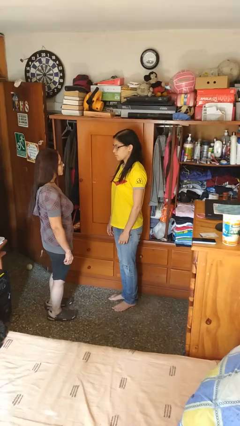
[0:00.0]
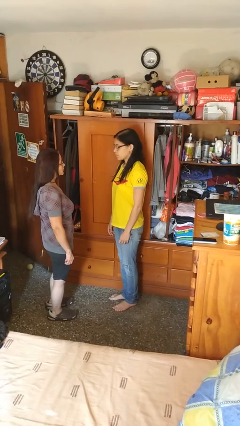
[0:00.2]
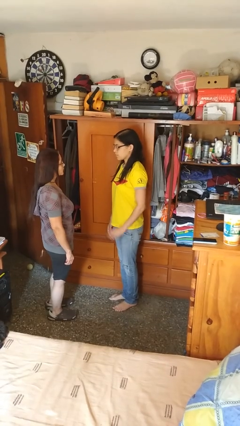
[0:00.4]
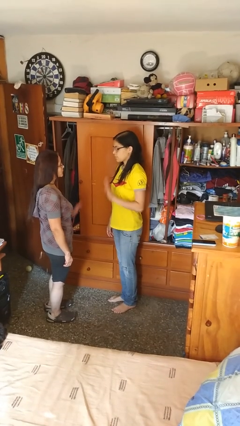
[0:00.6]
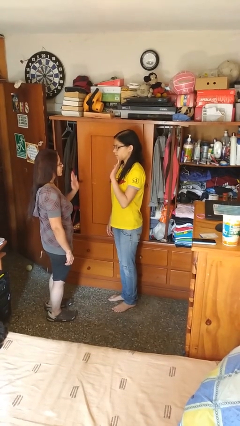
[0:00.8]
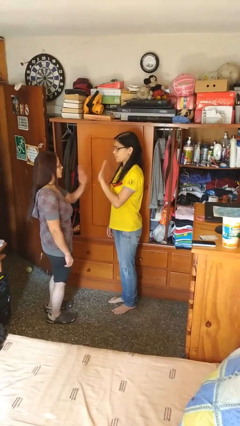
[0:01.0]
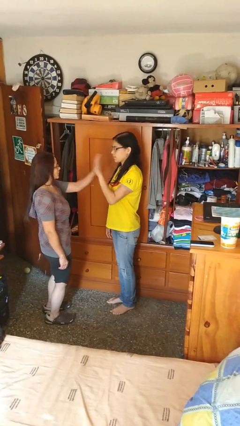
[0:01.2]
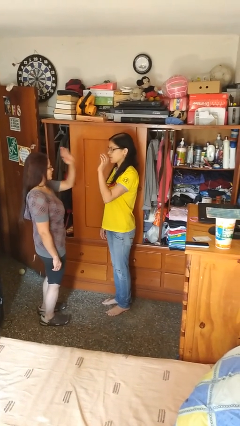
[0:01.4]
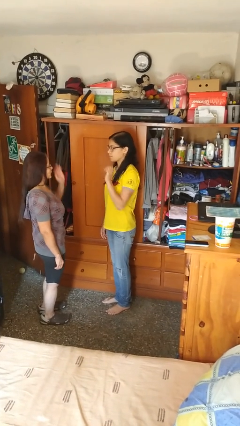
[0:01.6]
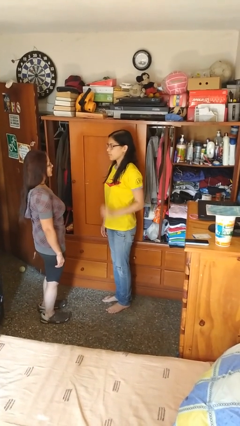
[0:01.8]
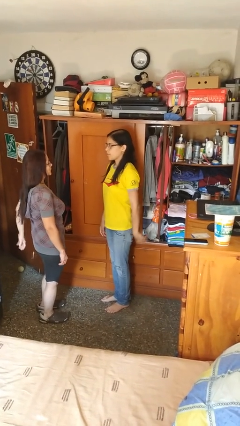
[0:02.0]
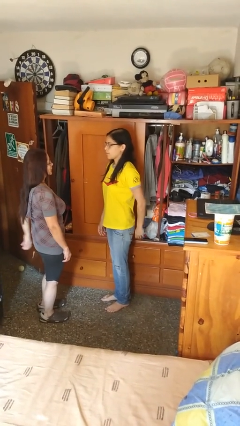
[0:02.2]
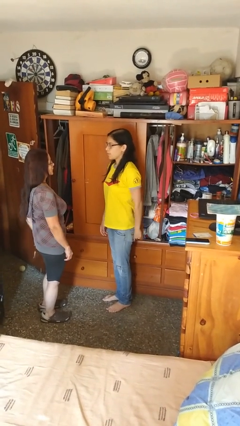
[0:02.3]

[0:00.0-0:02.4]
person highfives hand

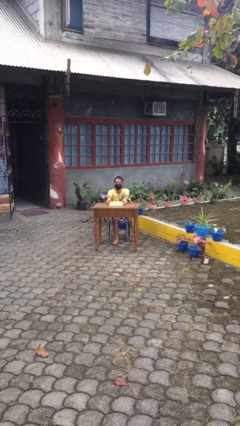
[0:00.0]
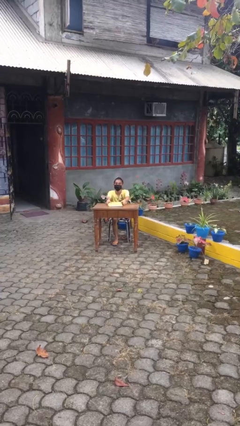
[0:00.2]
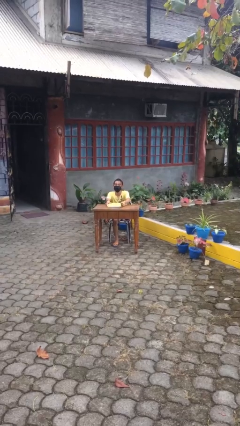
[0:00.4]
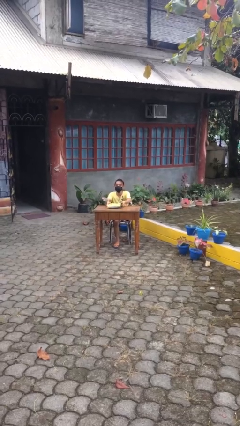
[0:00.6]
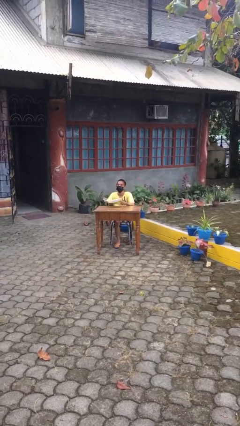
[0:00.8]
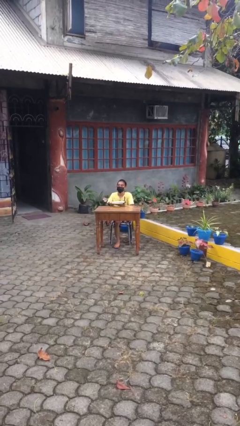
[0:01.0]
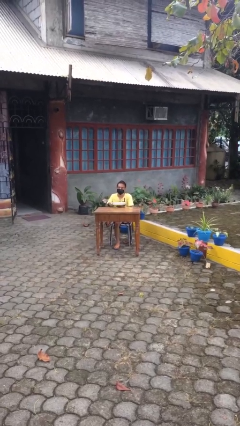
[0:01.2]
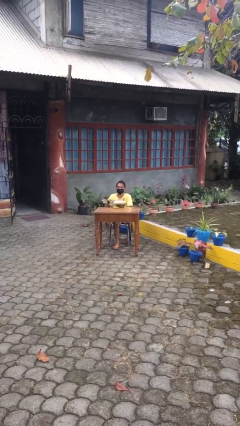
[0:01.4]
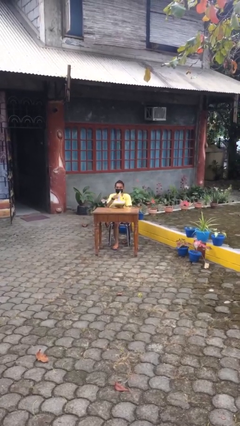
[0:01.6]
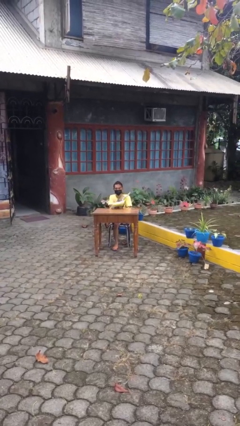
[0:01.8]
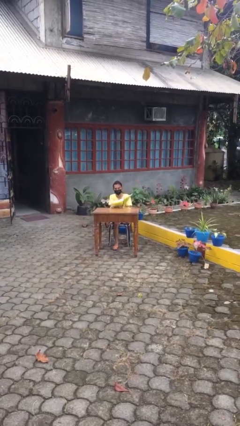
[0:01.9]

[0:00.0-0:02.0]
person picks up object from table

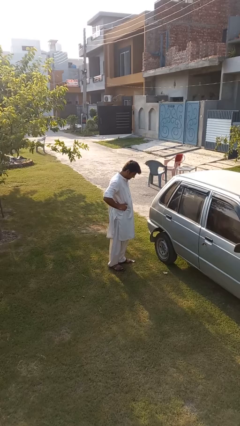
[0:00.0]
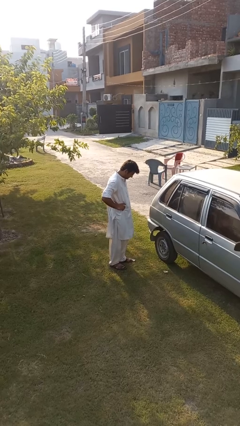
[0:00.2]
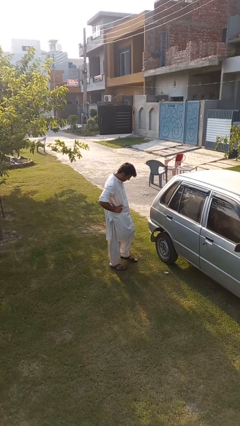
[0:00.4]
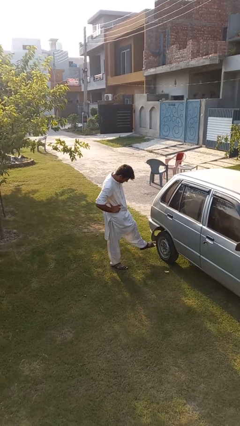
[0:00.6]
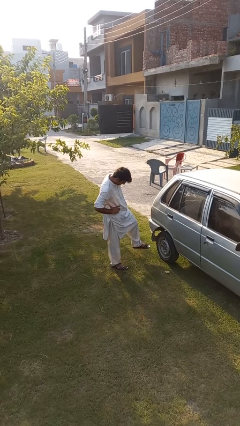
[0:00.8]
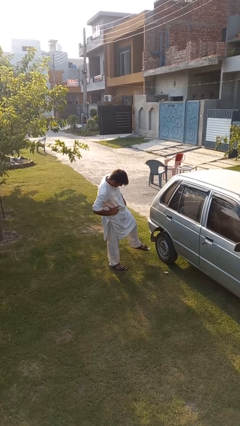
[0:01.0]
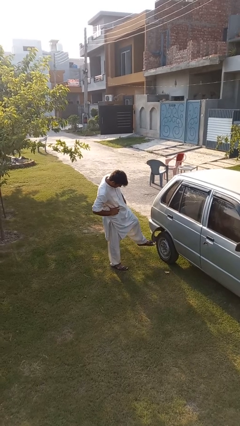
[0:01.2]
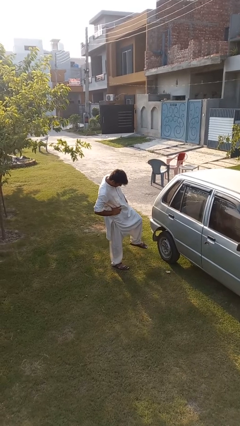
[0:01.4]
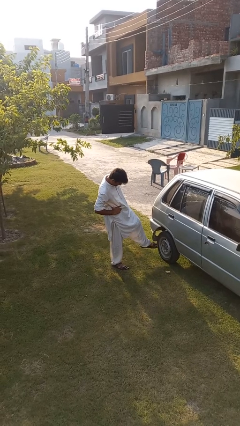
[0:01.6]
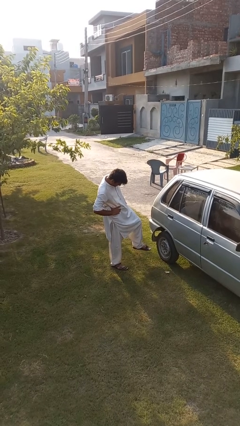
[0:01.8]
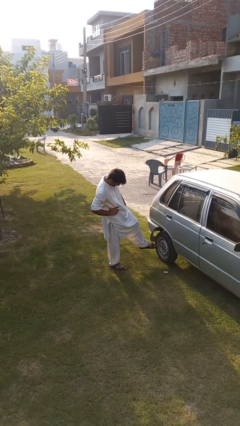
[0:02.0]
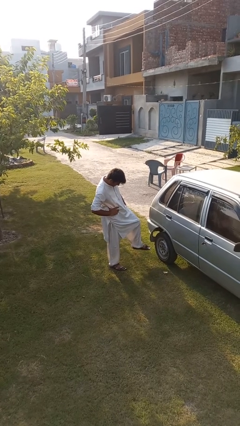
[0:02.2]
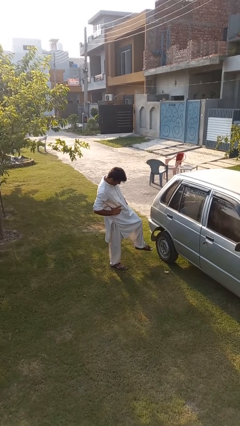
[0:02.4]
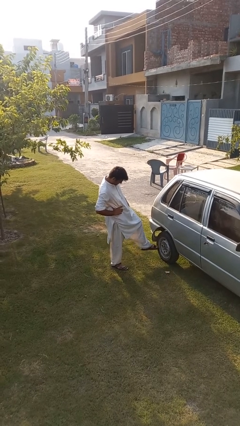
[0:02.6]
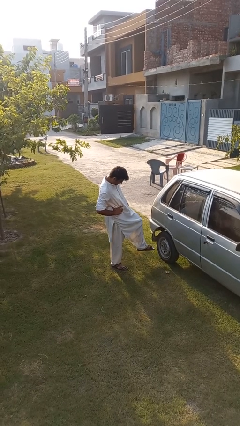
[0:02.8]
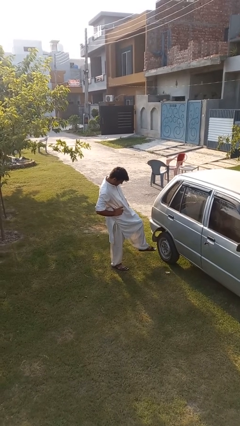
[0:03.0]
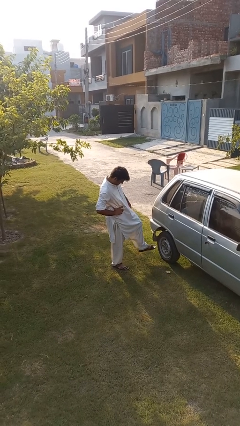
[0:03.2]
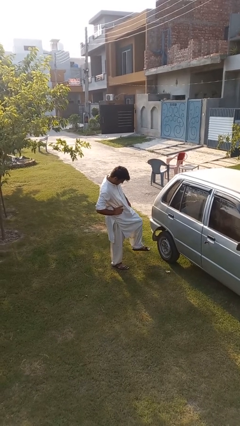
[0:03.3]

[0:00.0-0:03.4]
person kicks car tires

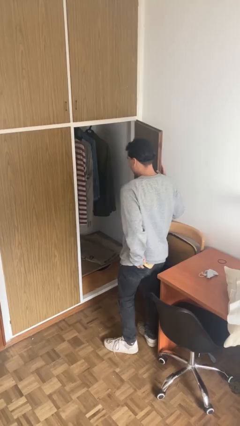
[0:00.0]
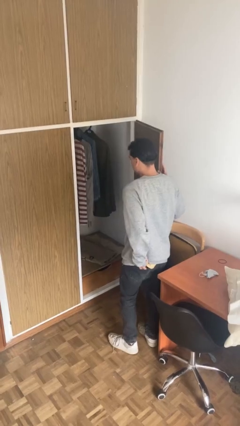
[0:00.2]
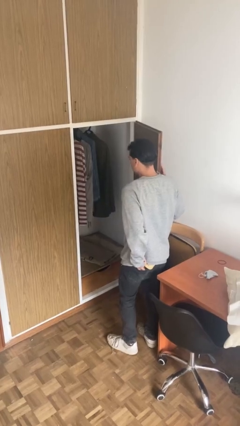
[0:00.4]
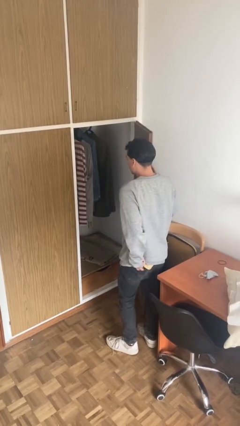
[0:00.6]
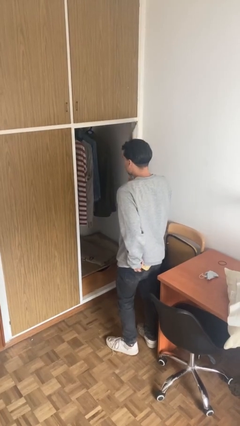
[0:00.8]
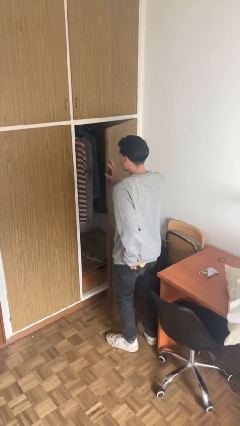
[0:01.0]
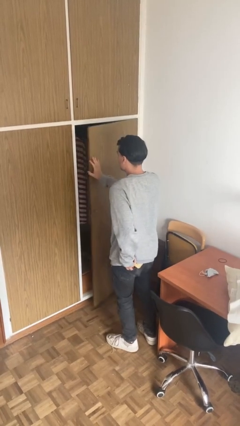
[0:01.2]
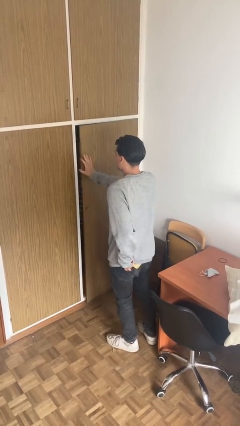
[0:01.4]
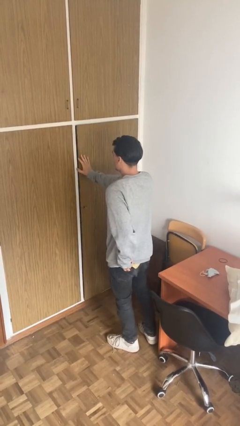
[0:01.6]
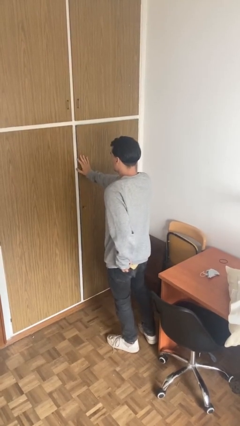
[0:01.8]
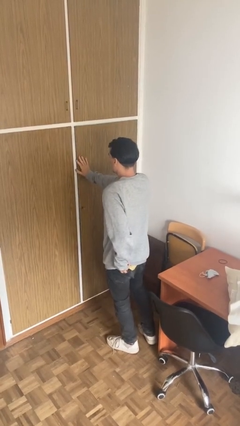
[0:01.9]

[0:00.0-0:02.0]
person closes closet door

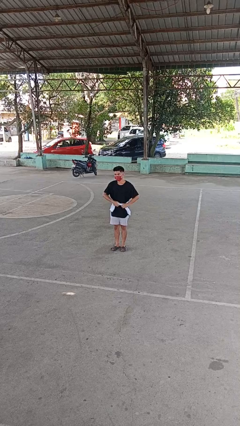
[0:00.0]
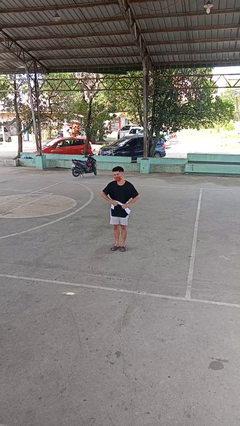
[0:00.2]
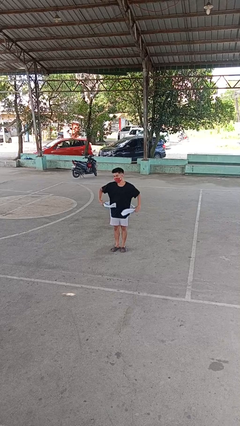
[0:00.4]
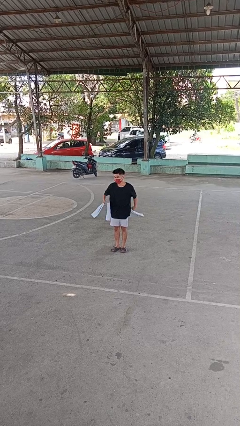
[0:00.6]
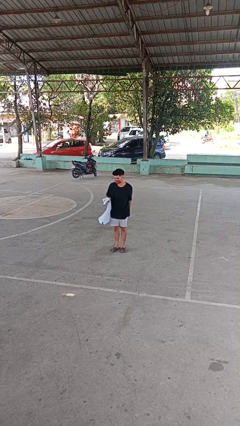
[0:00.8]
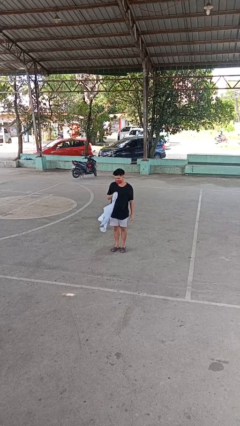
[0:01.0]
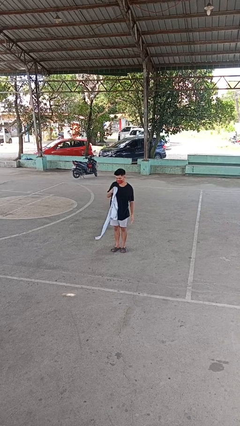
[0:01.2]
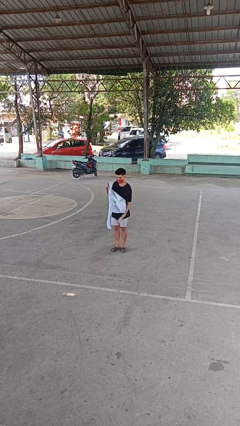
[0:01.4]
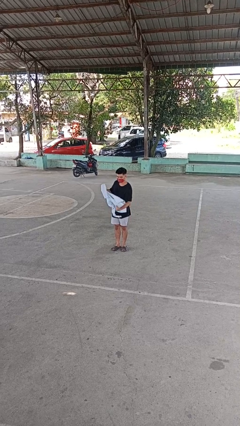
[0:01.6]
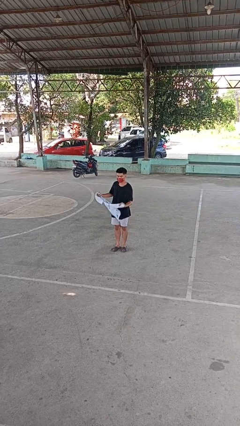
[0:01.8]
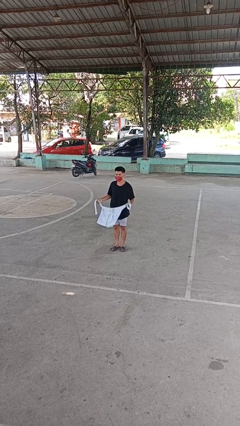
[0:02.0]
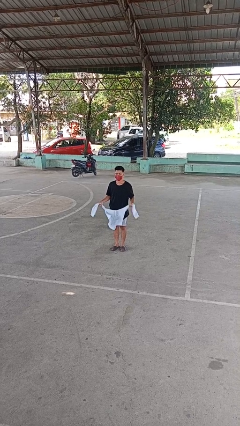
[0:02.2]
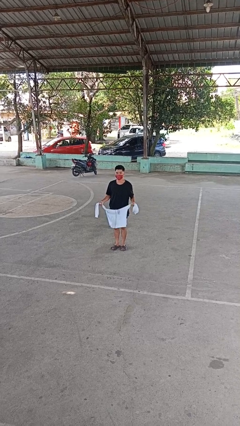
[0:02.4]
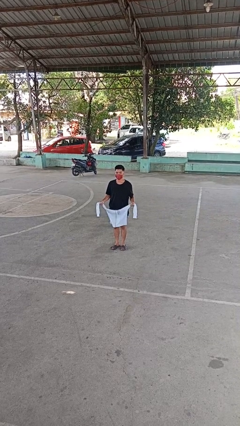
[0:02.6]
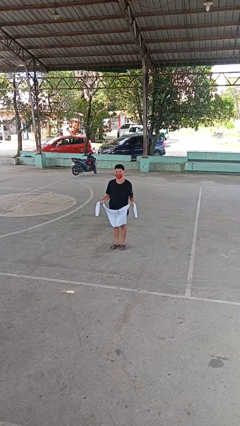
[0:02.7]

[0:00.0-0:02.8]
person unties jacket around waist

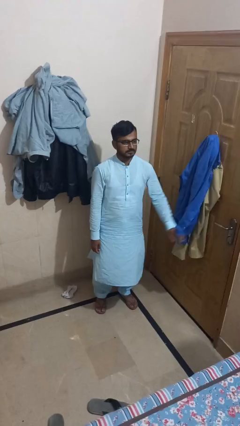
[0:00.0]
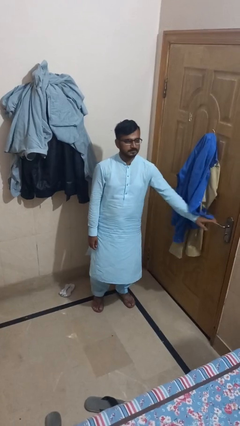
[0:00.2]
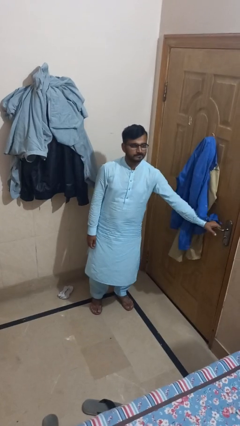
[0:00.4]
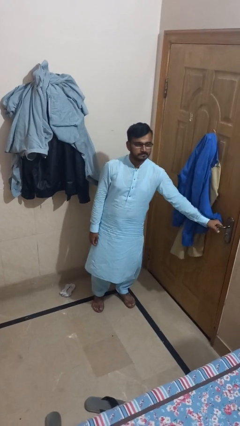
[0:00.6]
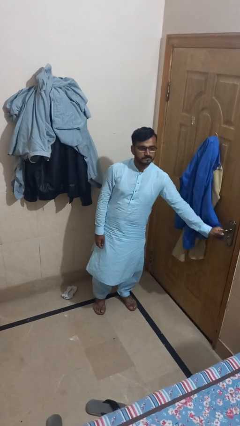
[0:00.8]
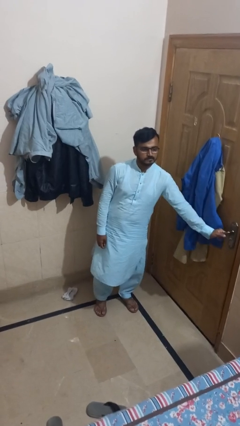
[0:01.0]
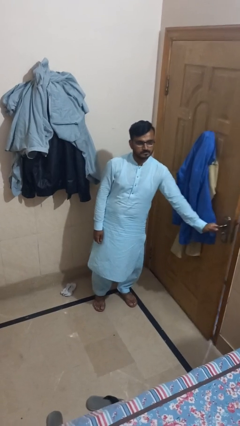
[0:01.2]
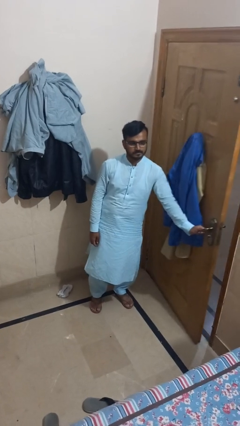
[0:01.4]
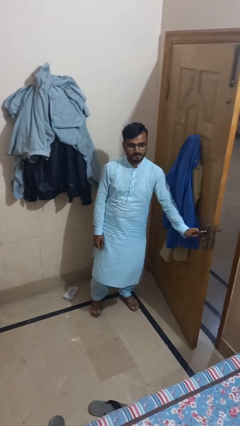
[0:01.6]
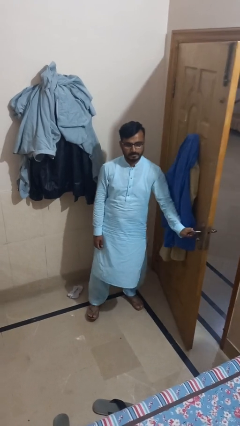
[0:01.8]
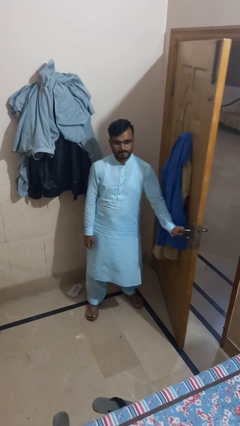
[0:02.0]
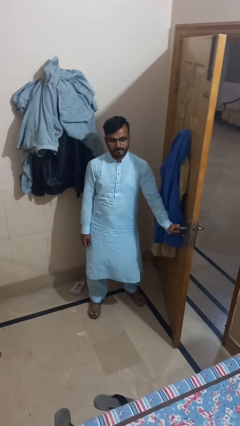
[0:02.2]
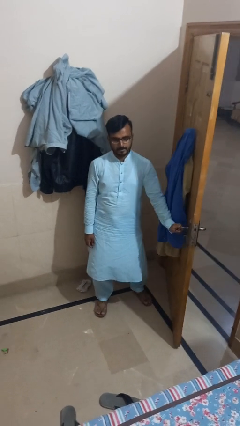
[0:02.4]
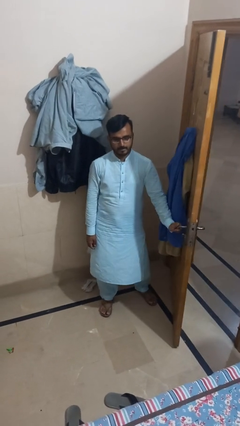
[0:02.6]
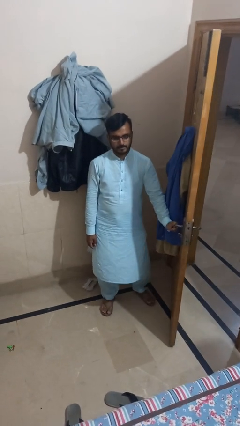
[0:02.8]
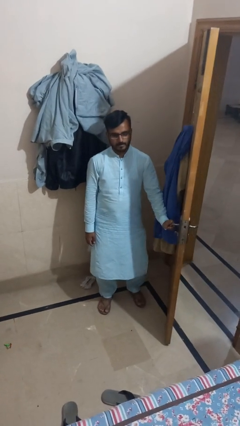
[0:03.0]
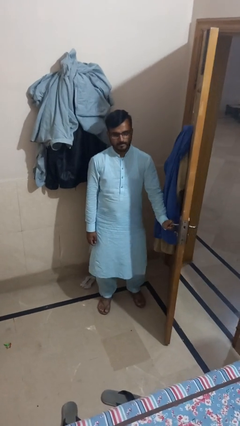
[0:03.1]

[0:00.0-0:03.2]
person opens closet door

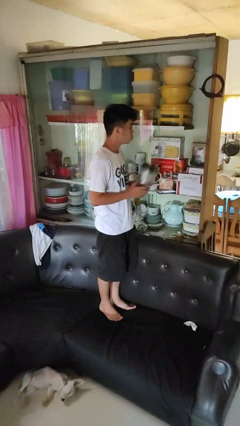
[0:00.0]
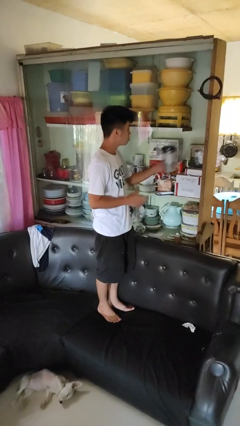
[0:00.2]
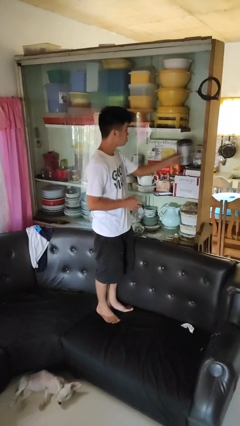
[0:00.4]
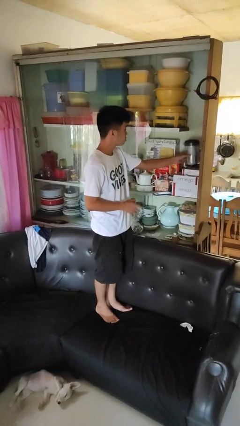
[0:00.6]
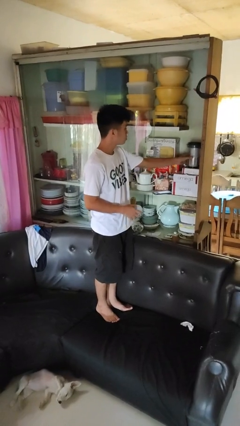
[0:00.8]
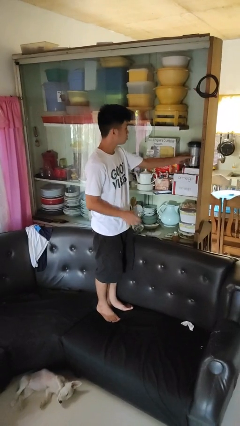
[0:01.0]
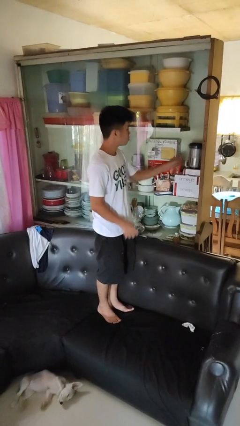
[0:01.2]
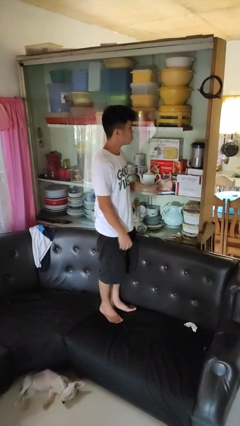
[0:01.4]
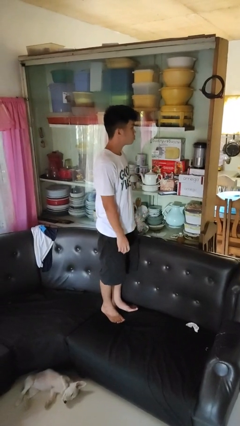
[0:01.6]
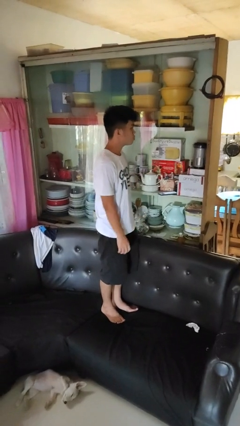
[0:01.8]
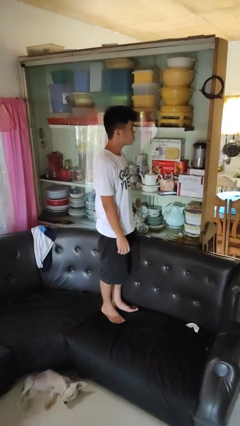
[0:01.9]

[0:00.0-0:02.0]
person puts down object into cabinet
